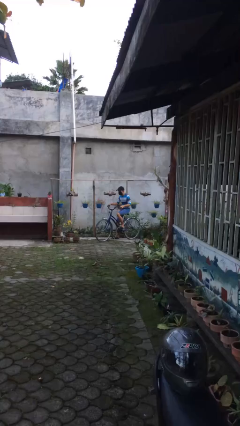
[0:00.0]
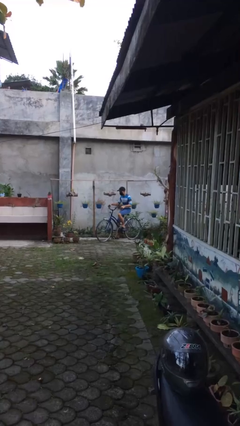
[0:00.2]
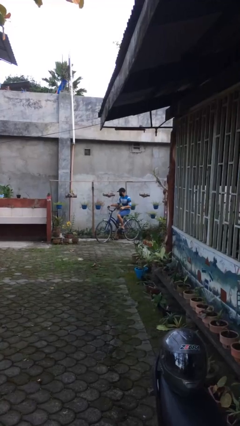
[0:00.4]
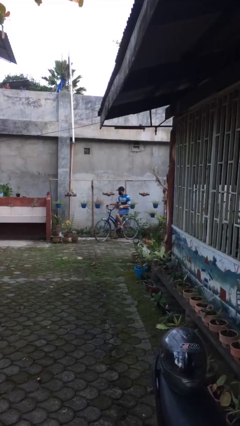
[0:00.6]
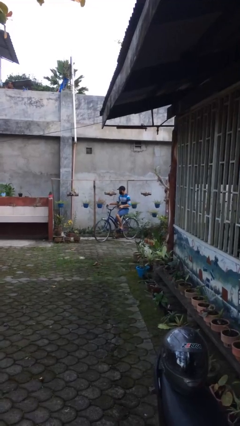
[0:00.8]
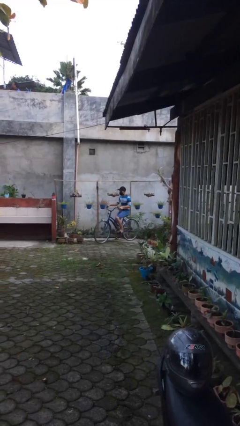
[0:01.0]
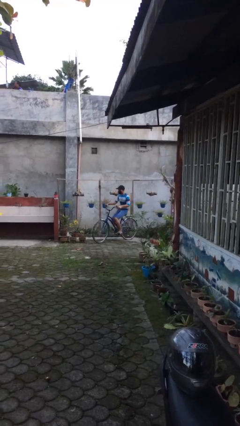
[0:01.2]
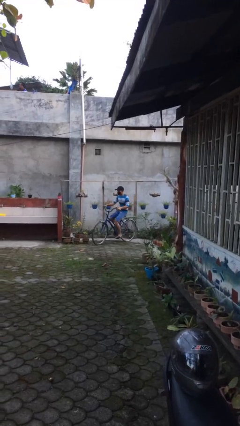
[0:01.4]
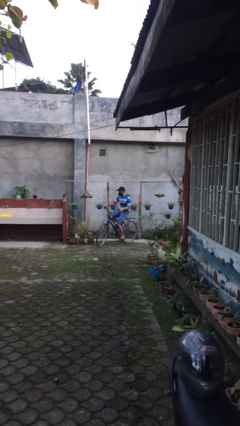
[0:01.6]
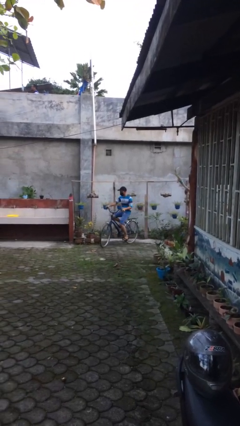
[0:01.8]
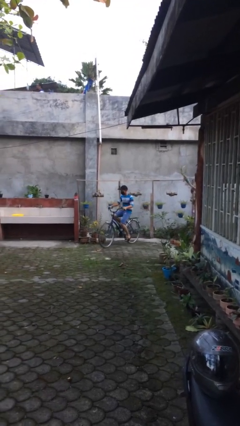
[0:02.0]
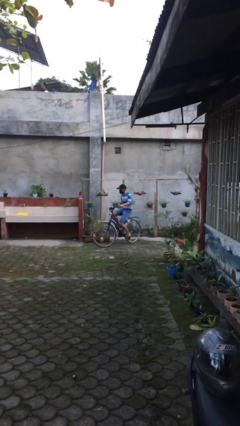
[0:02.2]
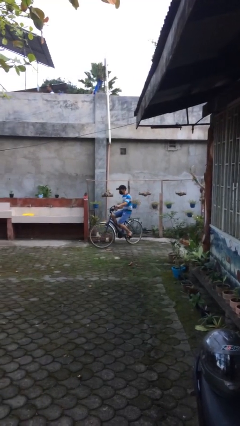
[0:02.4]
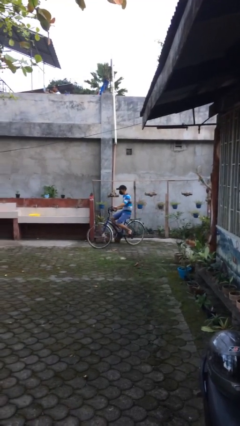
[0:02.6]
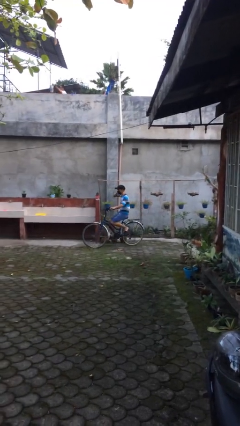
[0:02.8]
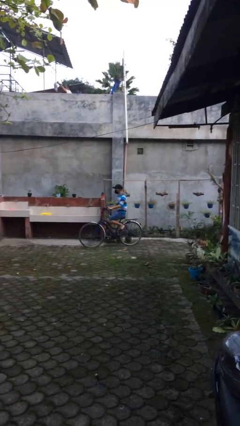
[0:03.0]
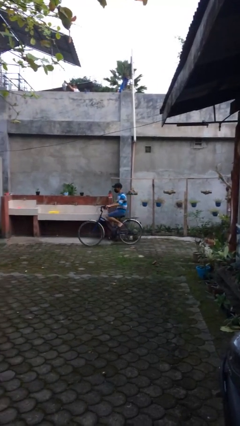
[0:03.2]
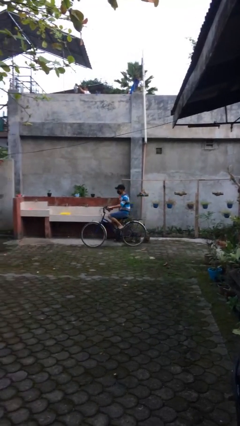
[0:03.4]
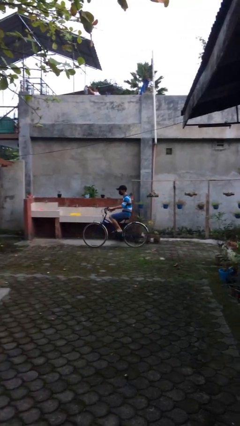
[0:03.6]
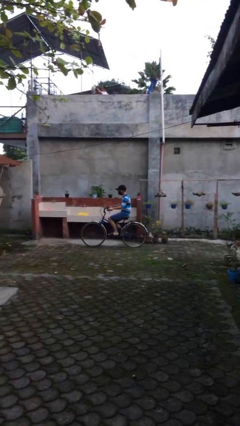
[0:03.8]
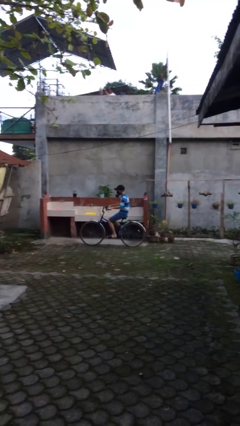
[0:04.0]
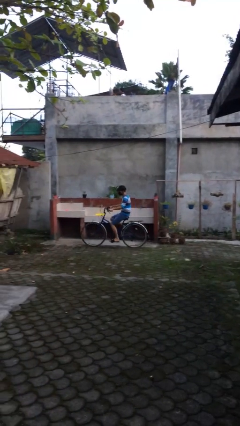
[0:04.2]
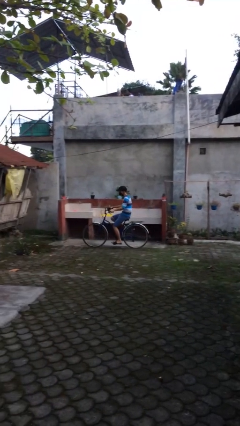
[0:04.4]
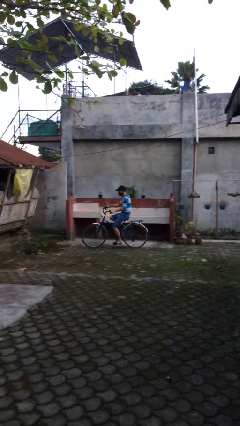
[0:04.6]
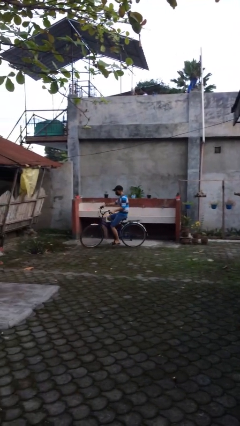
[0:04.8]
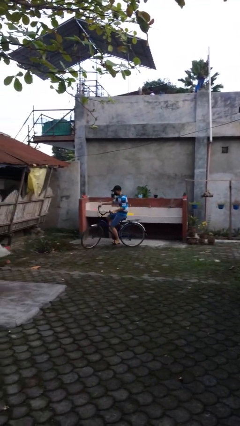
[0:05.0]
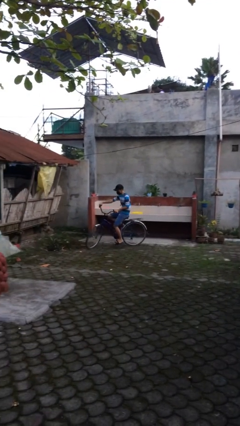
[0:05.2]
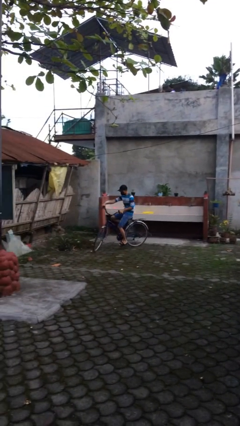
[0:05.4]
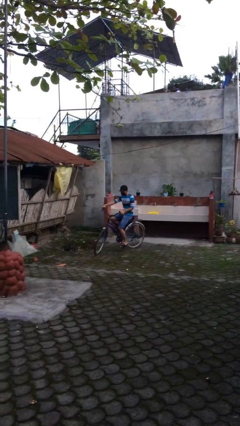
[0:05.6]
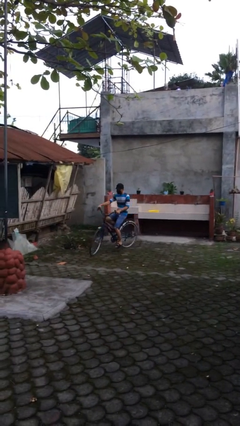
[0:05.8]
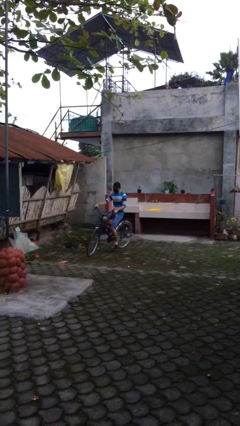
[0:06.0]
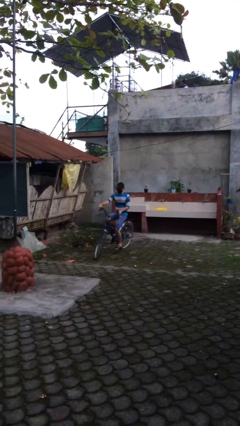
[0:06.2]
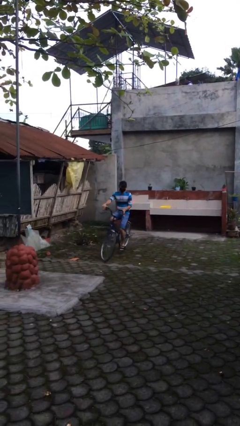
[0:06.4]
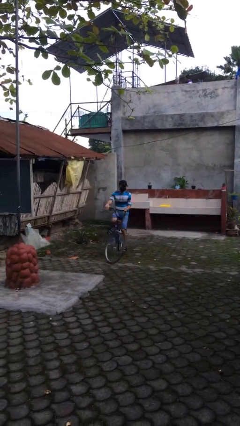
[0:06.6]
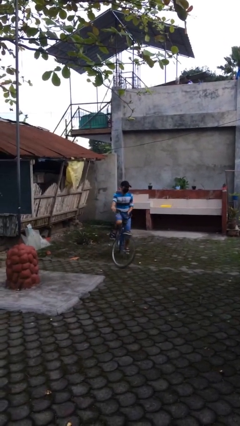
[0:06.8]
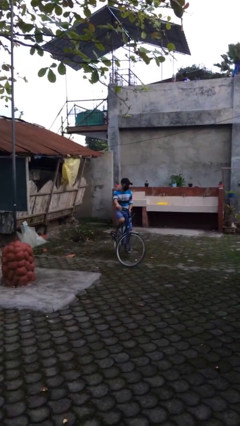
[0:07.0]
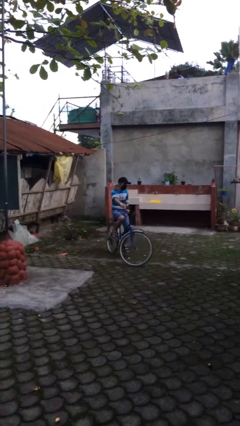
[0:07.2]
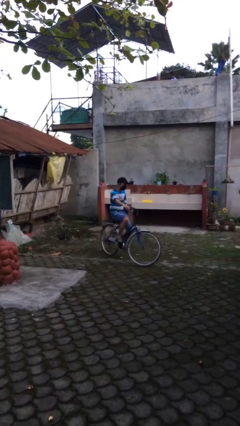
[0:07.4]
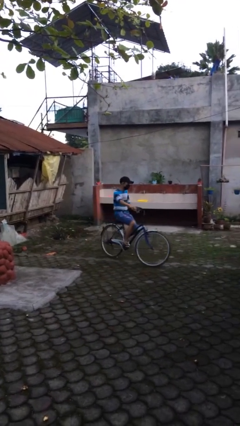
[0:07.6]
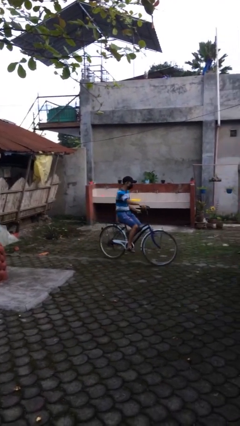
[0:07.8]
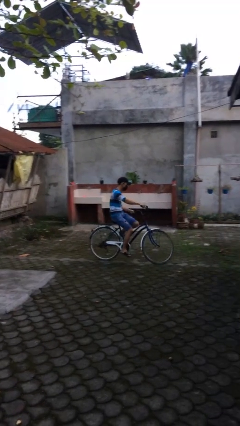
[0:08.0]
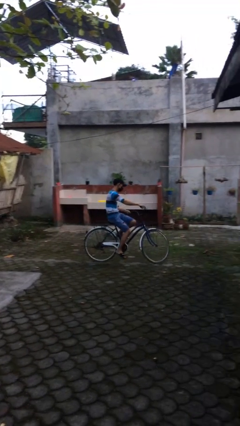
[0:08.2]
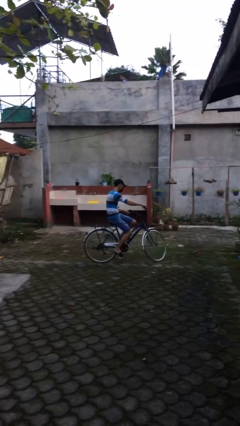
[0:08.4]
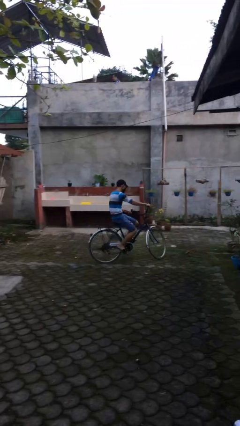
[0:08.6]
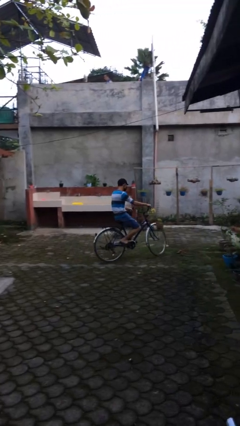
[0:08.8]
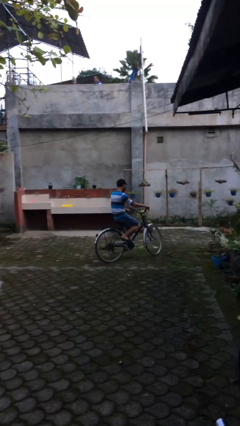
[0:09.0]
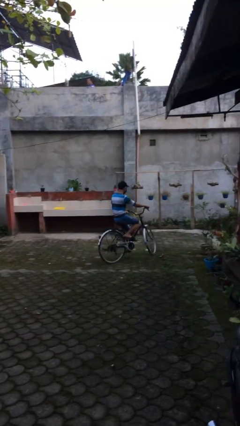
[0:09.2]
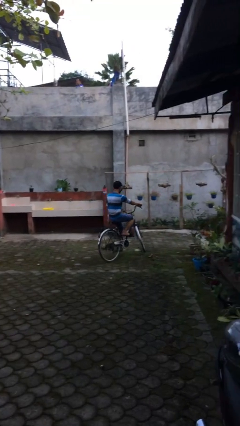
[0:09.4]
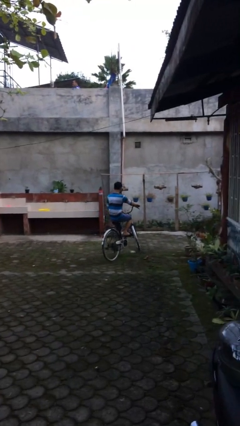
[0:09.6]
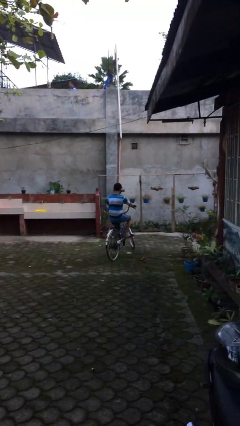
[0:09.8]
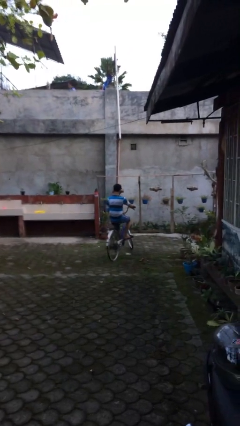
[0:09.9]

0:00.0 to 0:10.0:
person rides bicycle

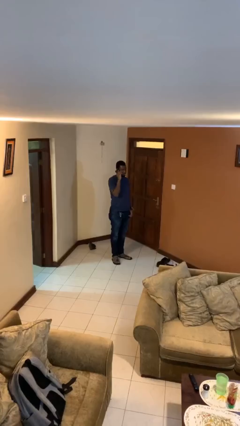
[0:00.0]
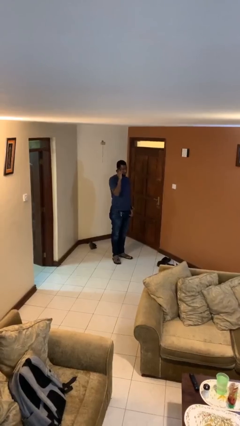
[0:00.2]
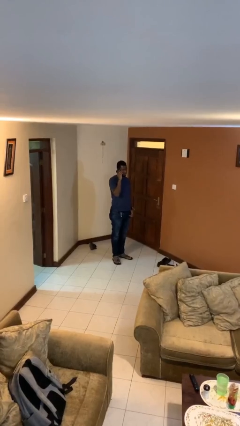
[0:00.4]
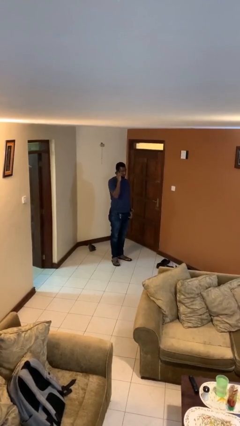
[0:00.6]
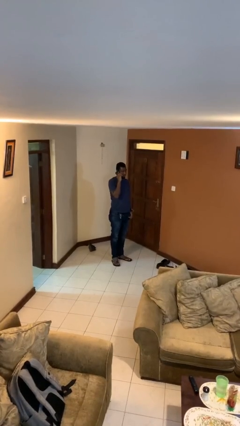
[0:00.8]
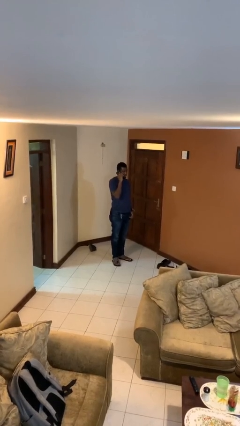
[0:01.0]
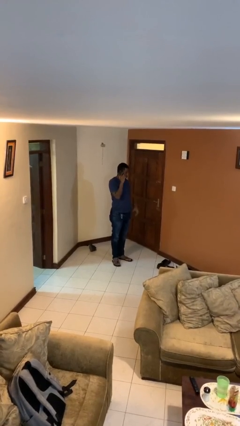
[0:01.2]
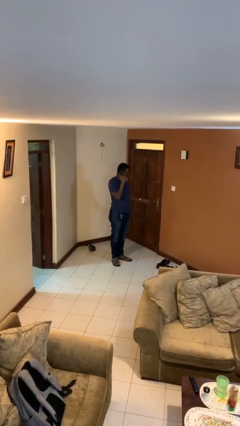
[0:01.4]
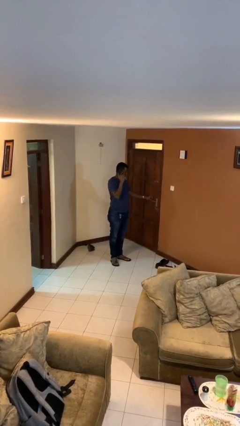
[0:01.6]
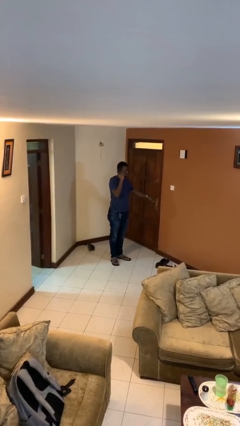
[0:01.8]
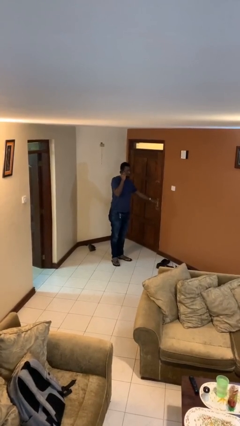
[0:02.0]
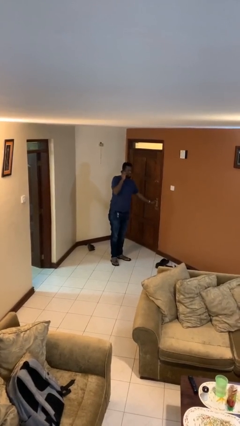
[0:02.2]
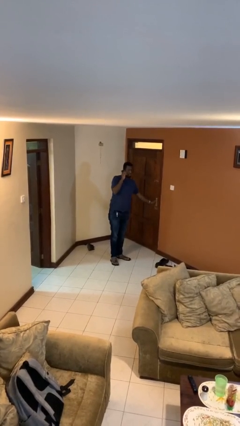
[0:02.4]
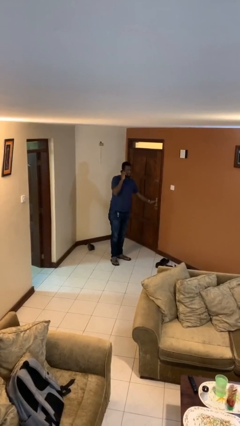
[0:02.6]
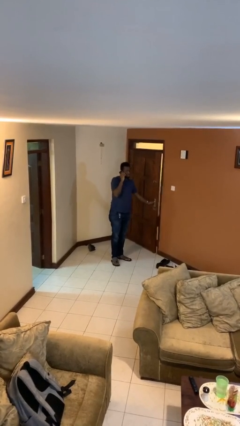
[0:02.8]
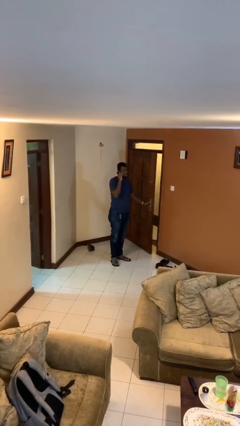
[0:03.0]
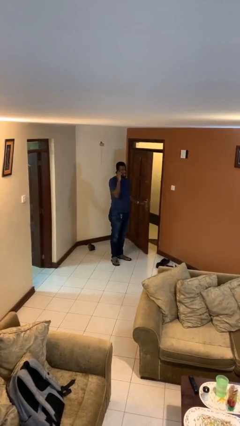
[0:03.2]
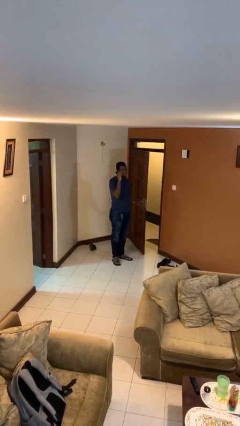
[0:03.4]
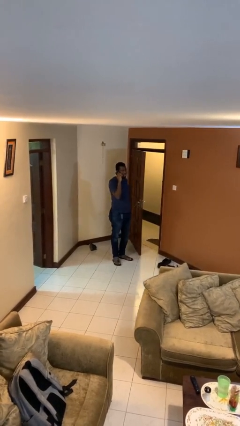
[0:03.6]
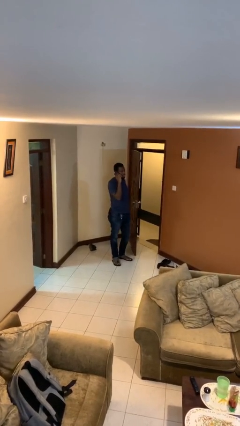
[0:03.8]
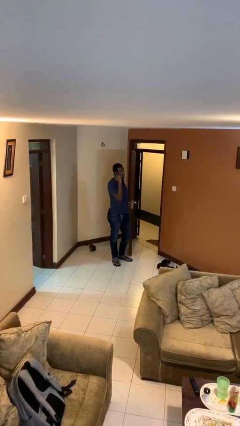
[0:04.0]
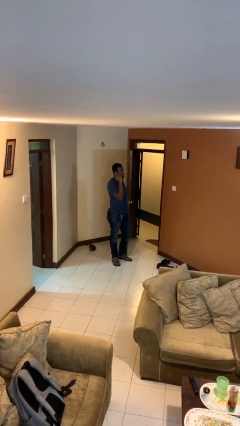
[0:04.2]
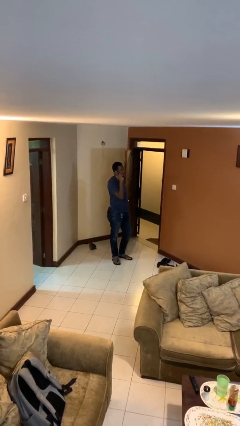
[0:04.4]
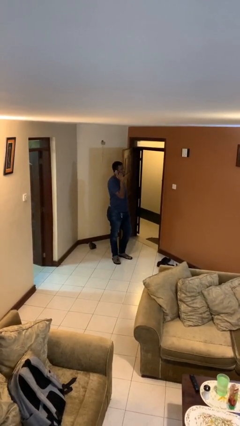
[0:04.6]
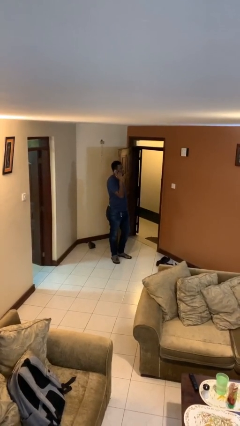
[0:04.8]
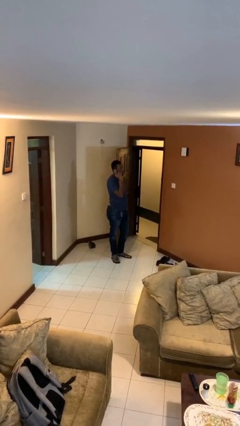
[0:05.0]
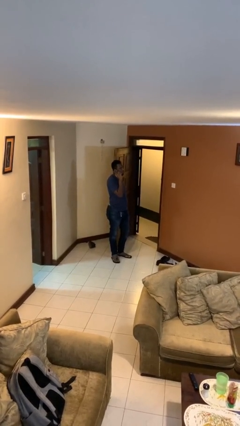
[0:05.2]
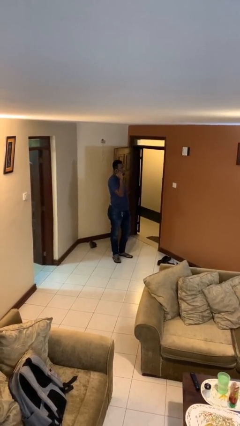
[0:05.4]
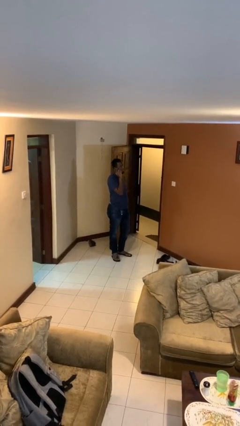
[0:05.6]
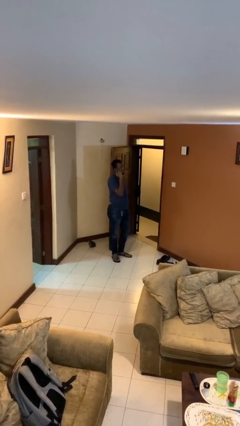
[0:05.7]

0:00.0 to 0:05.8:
person opens facility door

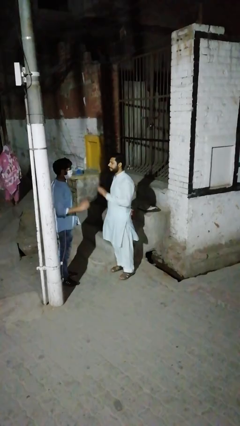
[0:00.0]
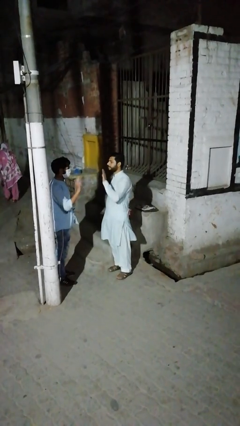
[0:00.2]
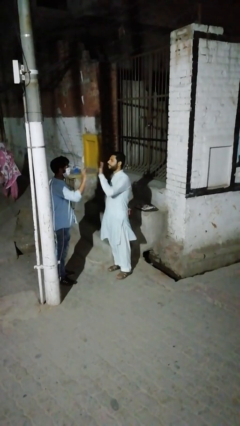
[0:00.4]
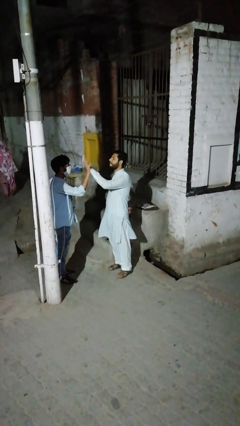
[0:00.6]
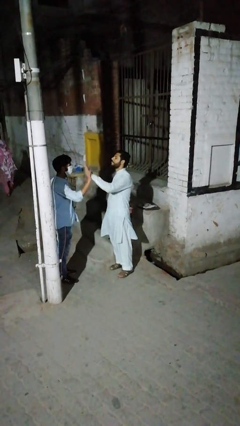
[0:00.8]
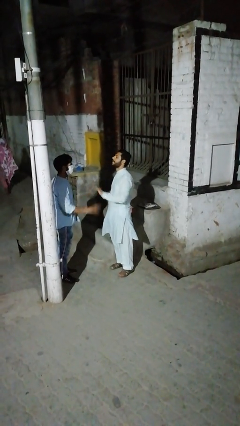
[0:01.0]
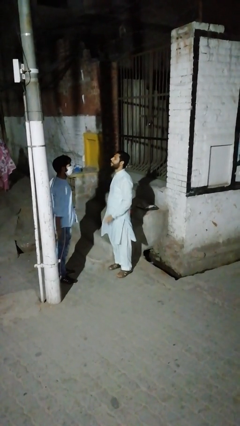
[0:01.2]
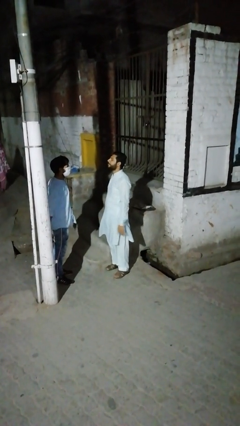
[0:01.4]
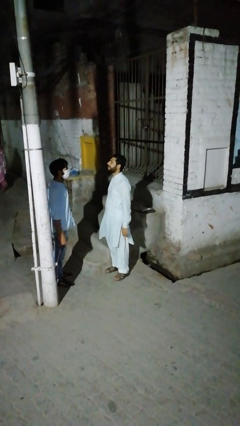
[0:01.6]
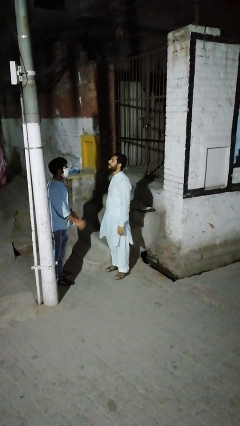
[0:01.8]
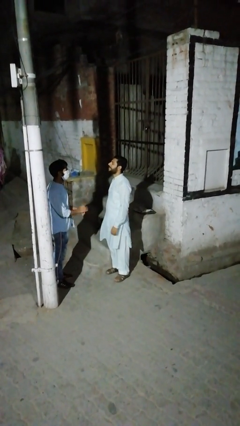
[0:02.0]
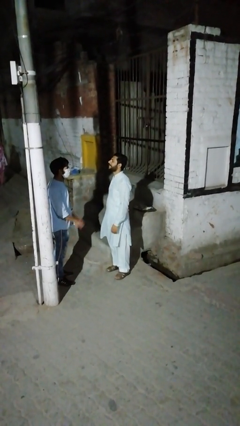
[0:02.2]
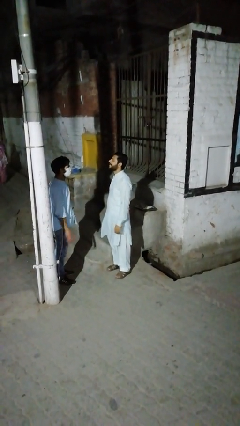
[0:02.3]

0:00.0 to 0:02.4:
person highfives hand
